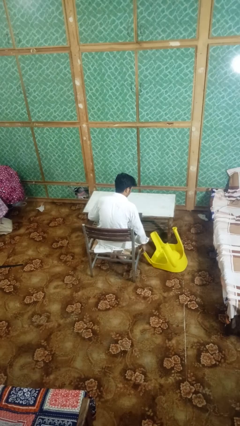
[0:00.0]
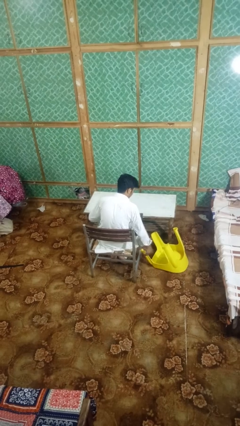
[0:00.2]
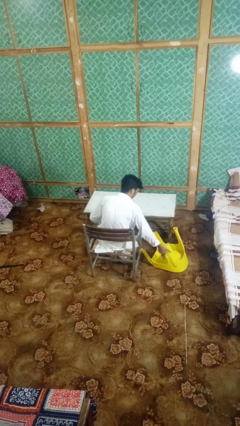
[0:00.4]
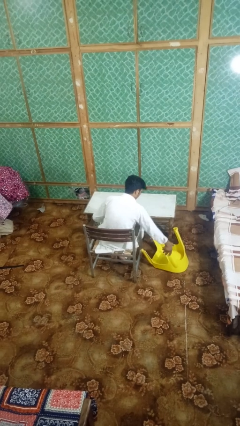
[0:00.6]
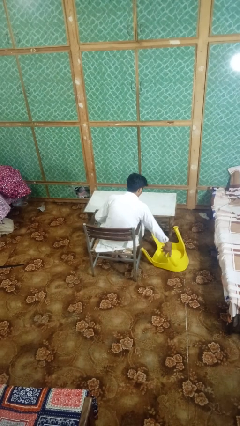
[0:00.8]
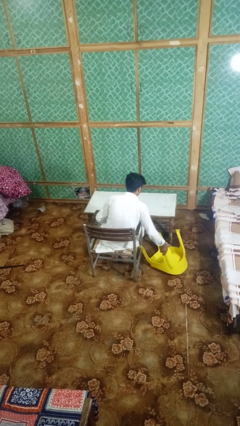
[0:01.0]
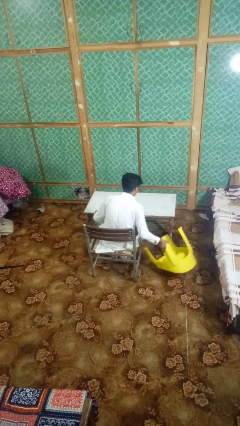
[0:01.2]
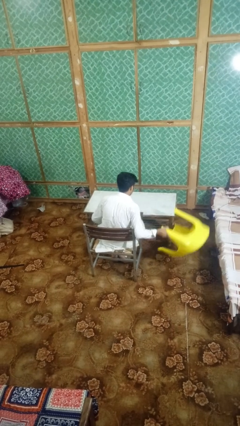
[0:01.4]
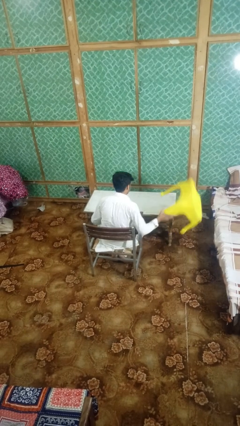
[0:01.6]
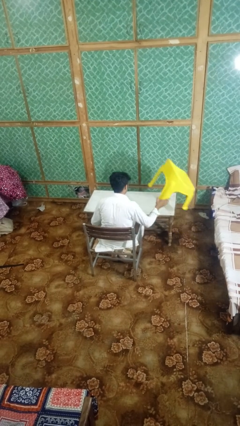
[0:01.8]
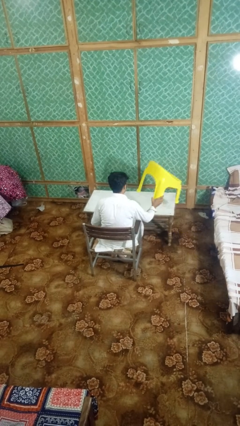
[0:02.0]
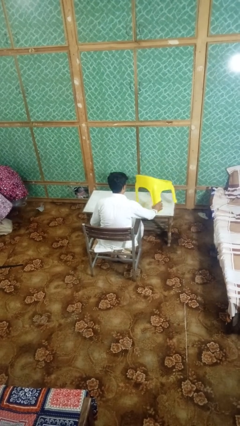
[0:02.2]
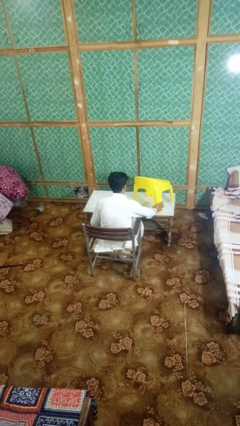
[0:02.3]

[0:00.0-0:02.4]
person sets upright furniture

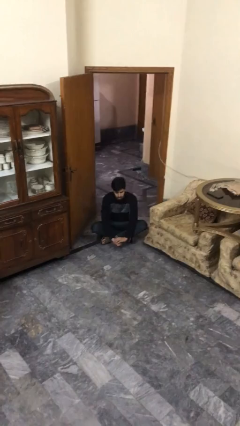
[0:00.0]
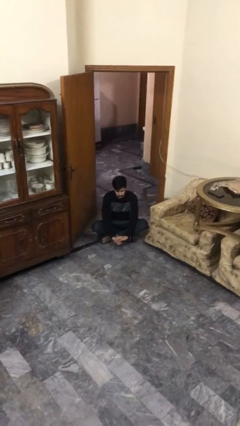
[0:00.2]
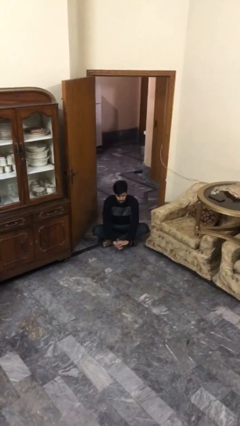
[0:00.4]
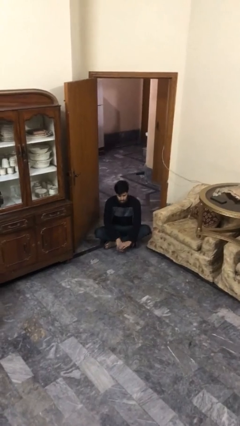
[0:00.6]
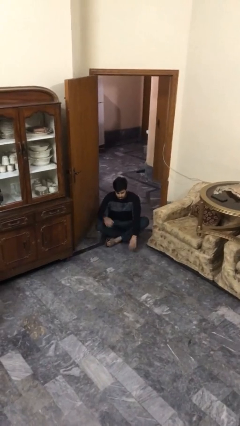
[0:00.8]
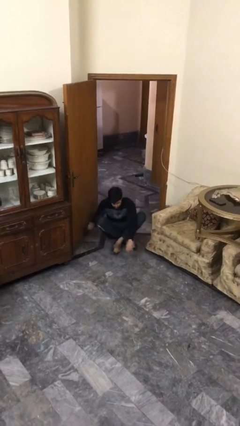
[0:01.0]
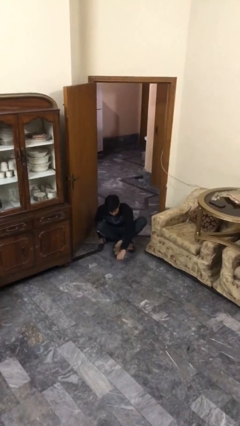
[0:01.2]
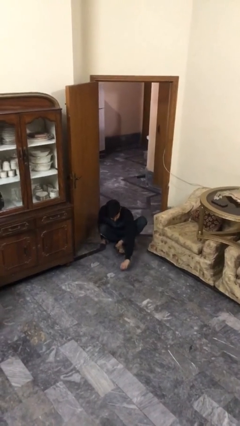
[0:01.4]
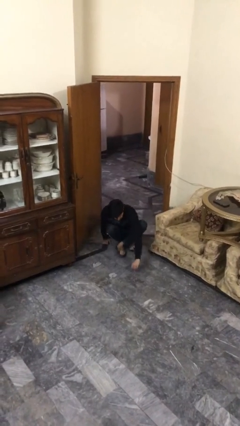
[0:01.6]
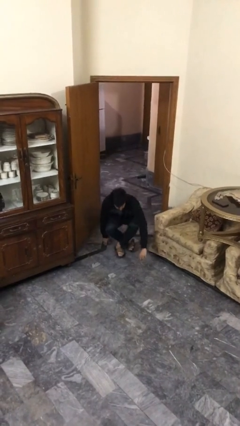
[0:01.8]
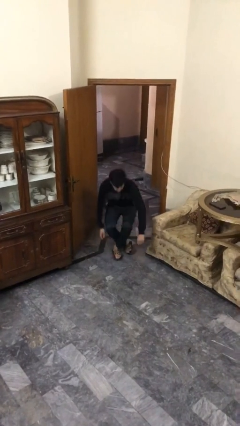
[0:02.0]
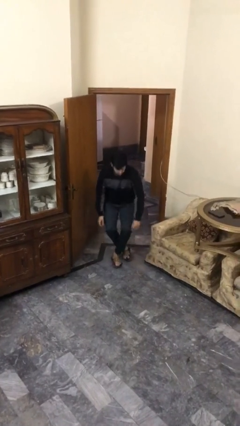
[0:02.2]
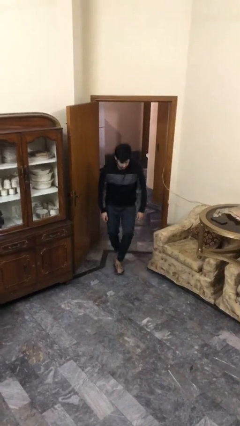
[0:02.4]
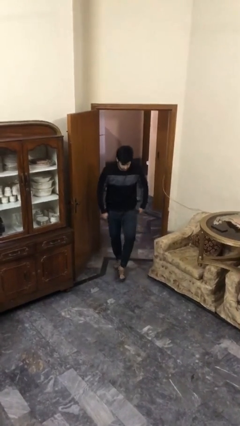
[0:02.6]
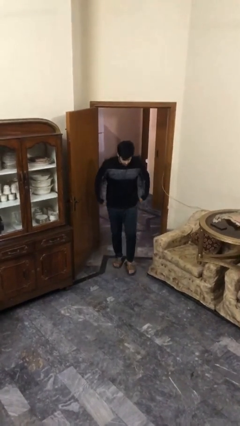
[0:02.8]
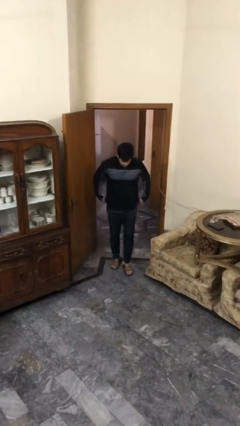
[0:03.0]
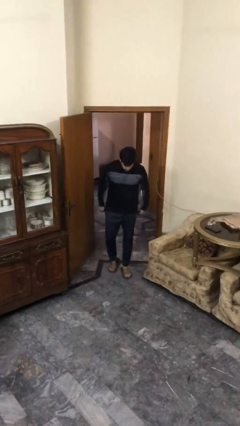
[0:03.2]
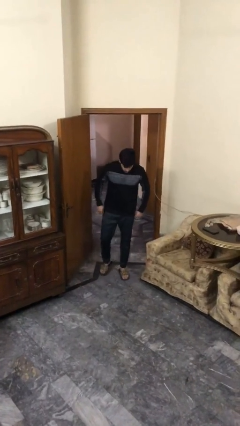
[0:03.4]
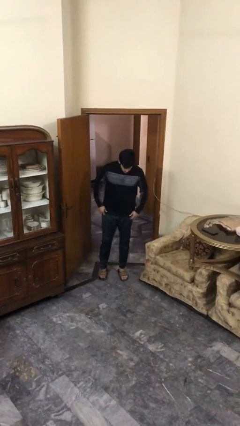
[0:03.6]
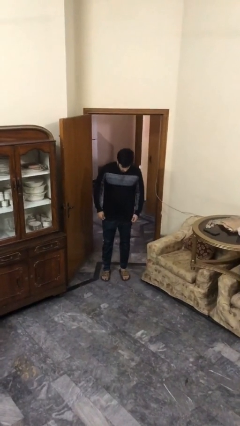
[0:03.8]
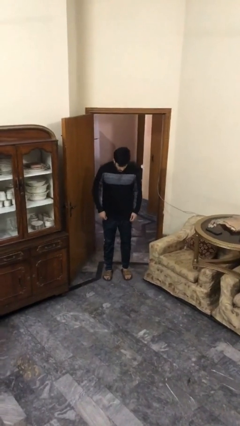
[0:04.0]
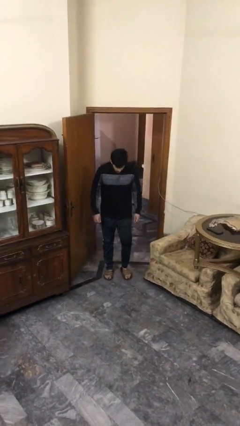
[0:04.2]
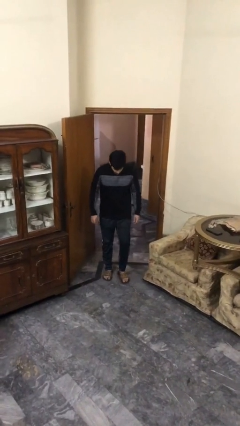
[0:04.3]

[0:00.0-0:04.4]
person stands up

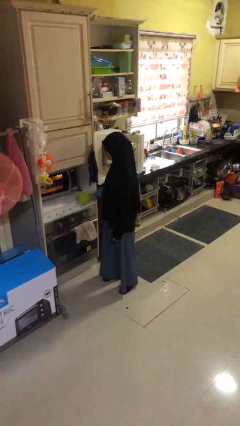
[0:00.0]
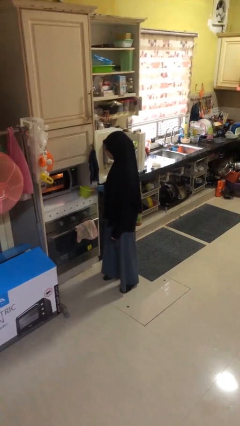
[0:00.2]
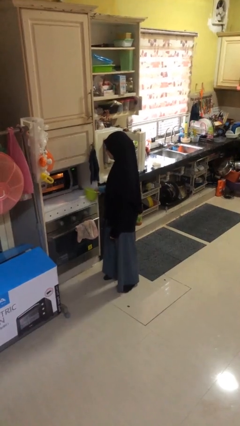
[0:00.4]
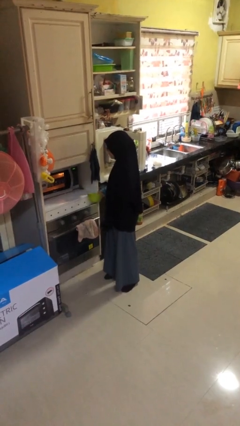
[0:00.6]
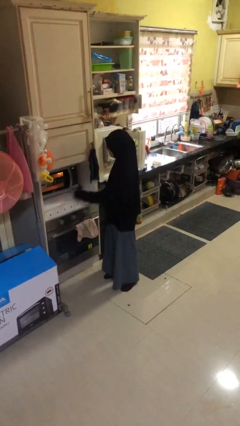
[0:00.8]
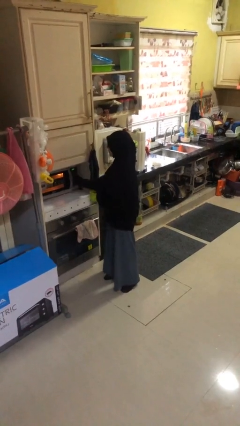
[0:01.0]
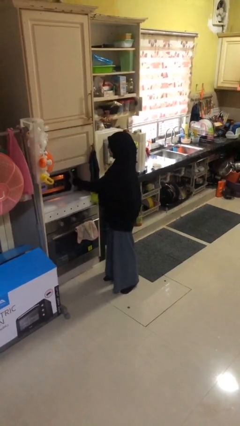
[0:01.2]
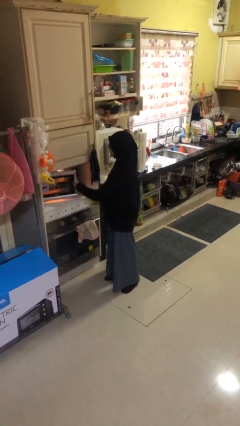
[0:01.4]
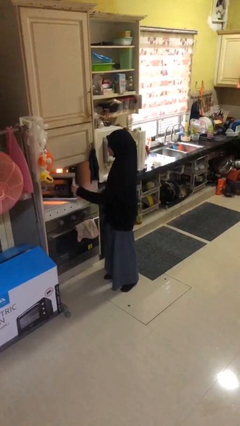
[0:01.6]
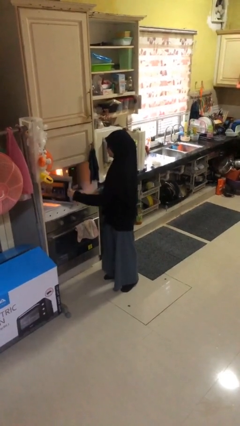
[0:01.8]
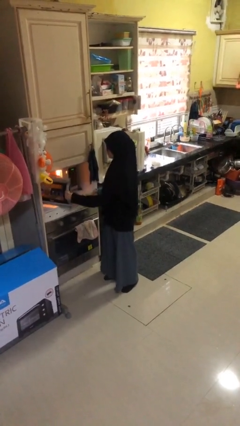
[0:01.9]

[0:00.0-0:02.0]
person opens microwave

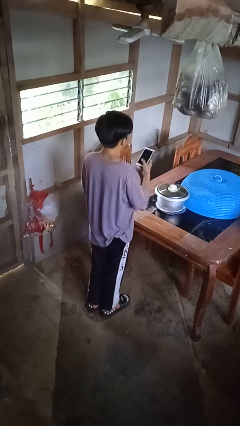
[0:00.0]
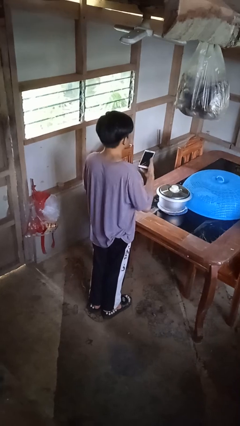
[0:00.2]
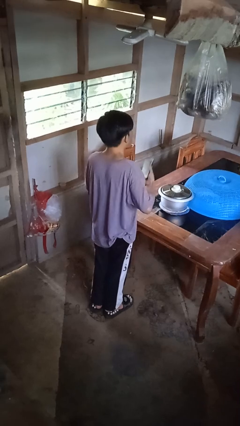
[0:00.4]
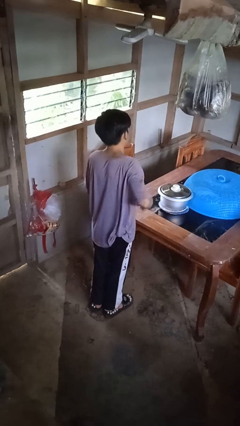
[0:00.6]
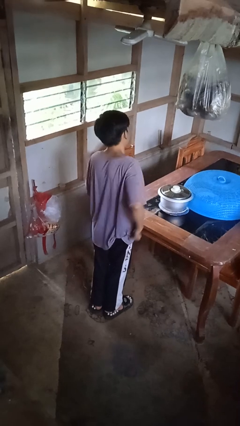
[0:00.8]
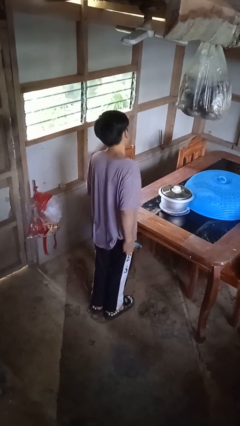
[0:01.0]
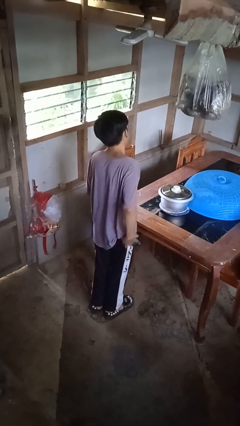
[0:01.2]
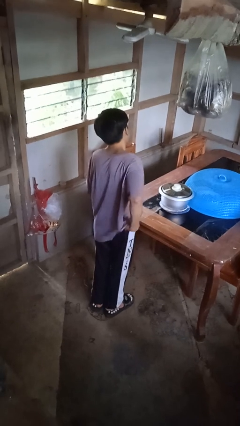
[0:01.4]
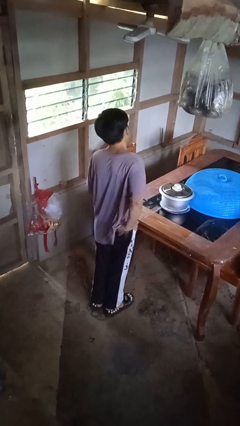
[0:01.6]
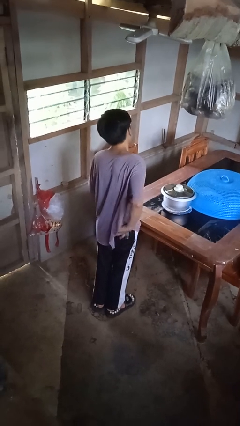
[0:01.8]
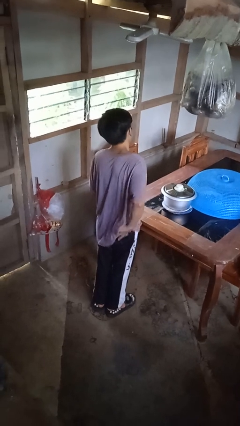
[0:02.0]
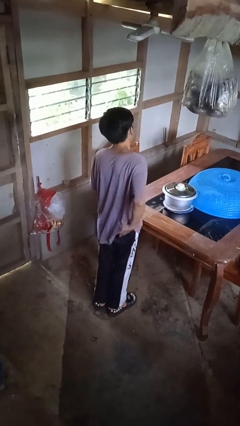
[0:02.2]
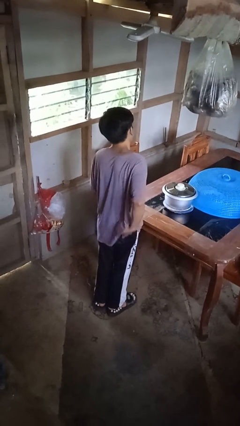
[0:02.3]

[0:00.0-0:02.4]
person puts phone into pocket

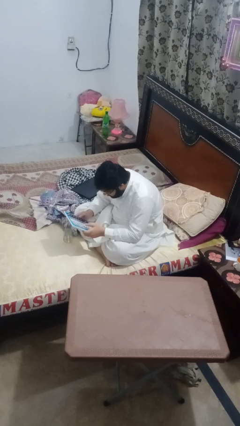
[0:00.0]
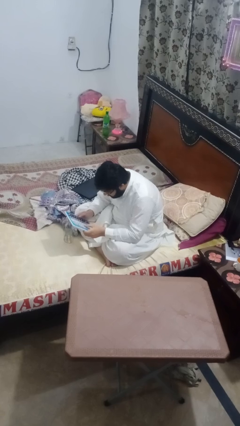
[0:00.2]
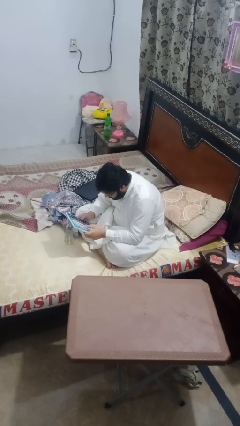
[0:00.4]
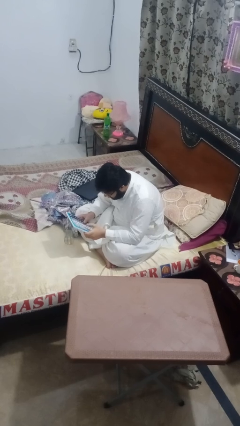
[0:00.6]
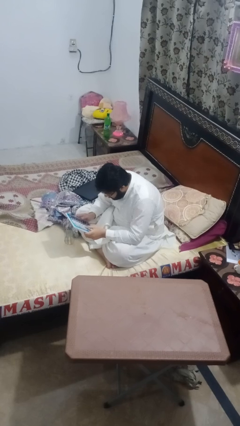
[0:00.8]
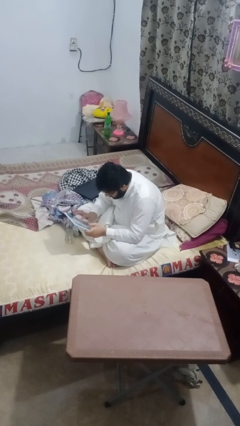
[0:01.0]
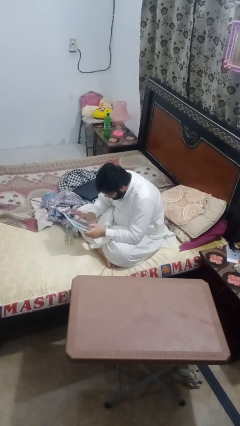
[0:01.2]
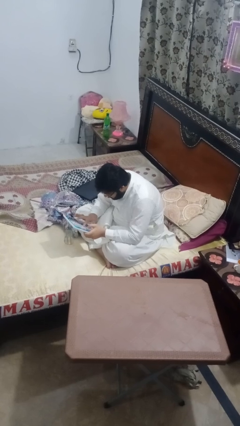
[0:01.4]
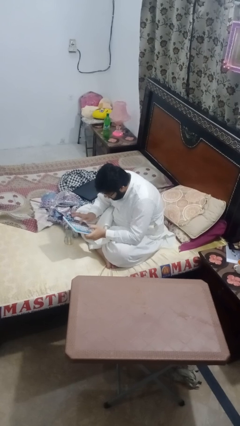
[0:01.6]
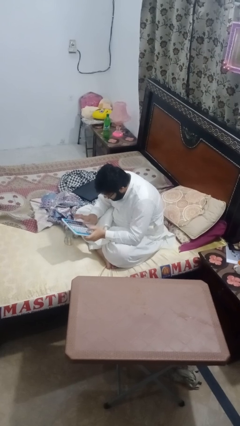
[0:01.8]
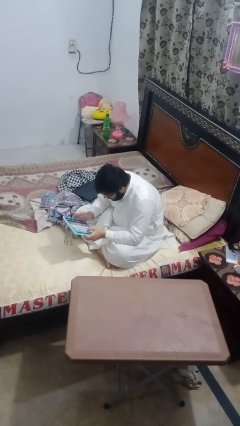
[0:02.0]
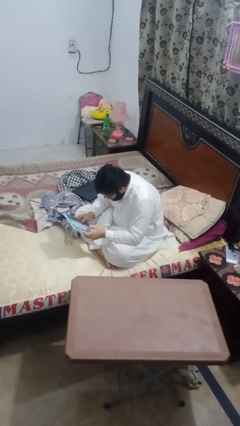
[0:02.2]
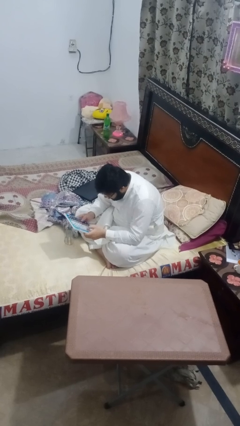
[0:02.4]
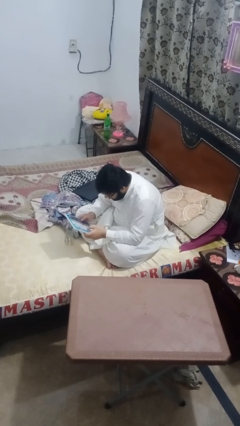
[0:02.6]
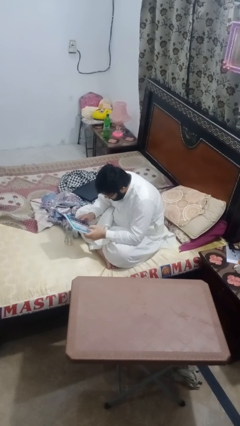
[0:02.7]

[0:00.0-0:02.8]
person interacts with tablet

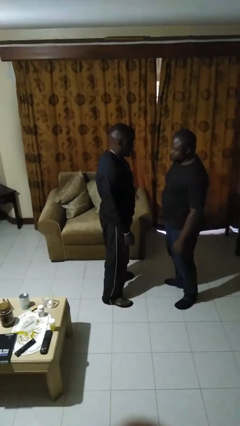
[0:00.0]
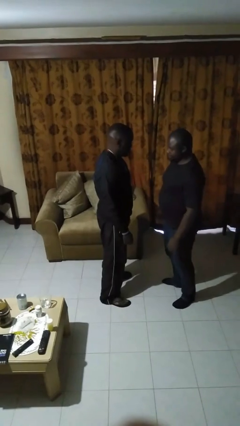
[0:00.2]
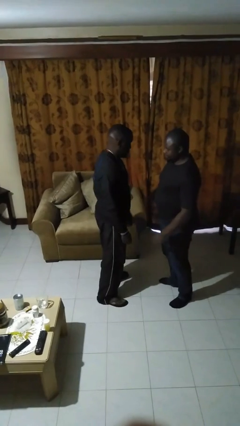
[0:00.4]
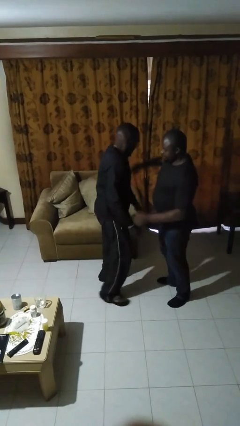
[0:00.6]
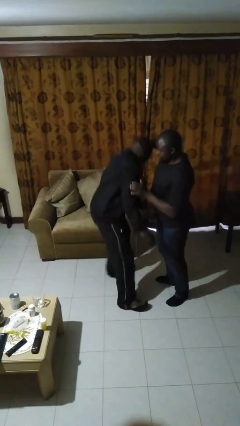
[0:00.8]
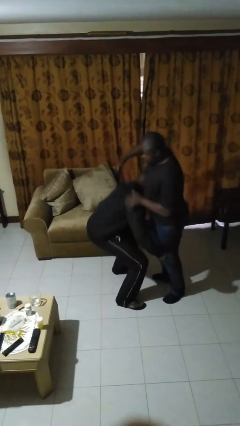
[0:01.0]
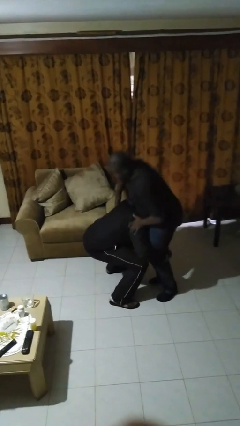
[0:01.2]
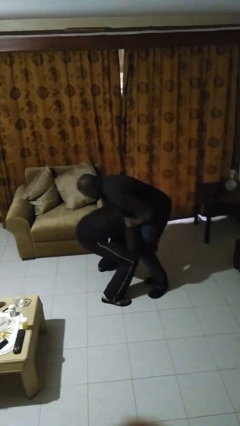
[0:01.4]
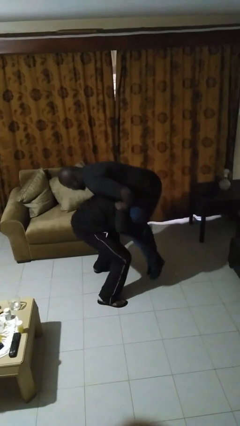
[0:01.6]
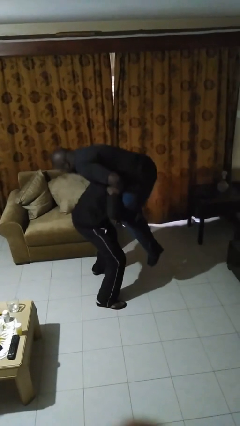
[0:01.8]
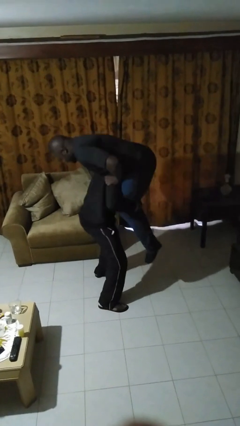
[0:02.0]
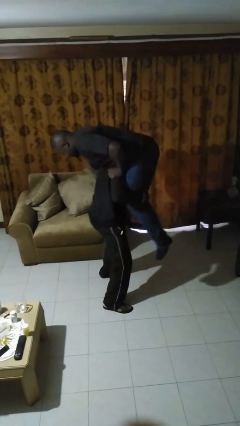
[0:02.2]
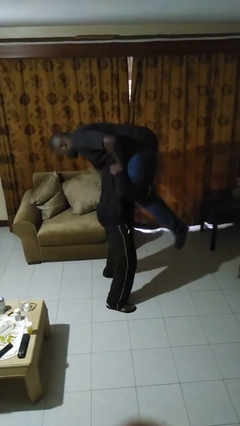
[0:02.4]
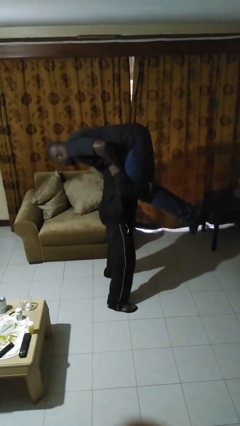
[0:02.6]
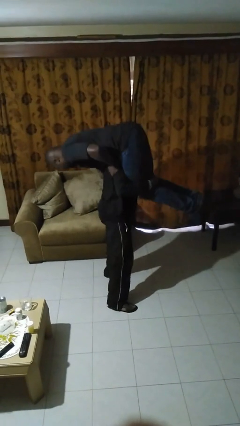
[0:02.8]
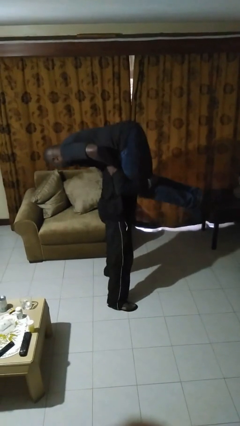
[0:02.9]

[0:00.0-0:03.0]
person carries person over shoulder
